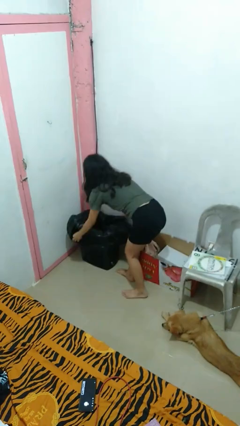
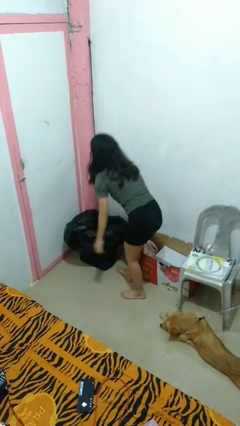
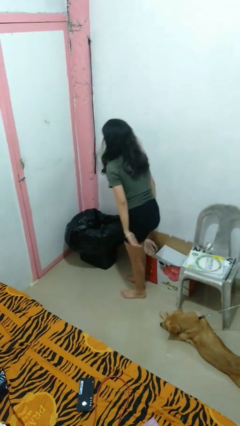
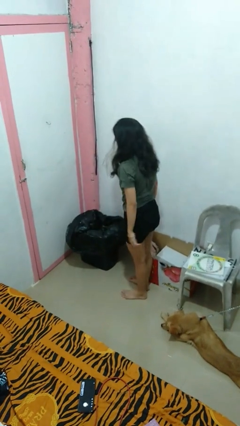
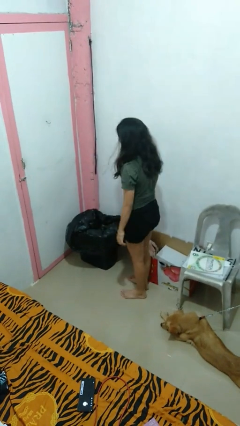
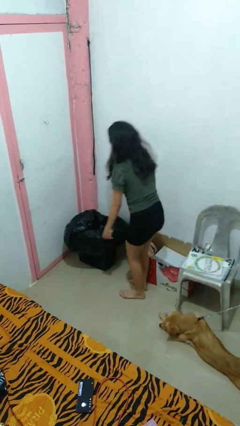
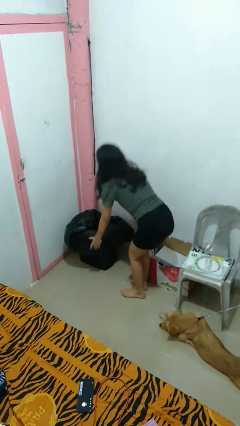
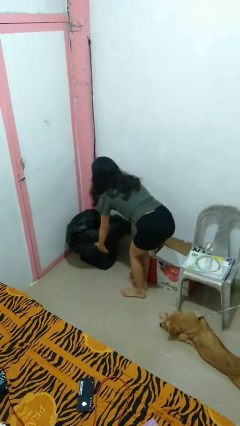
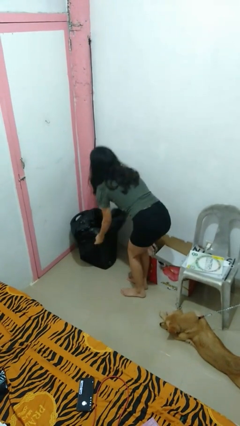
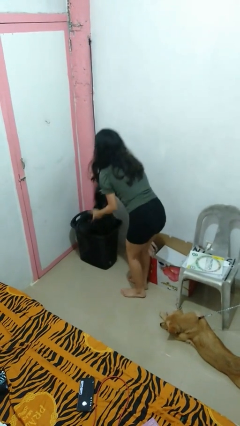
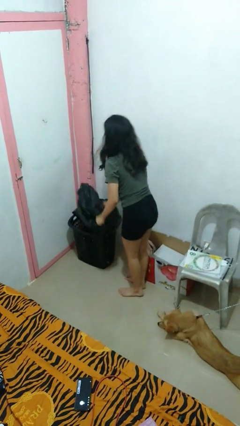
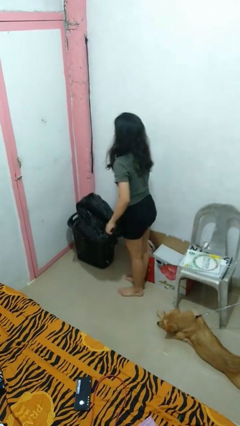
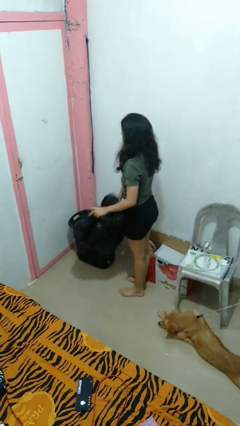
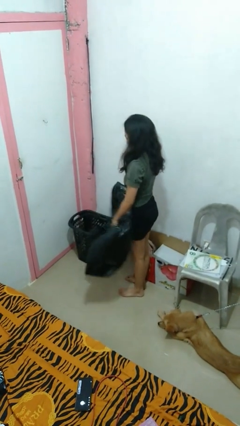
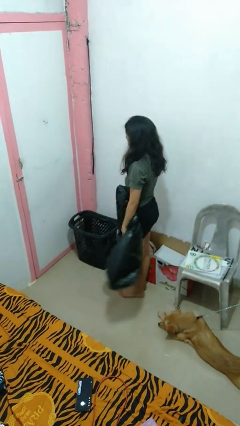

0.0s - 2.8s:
person removes trashbag from trashcan

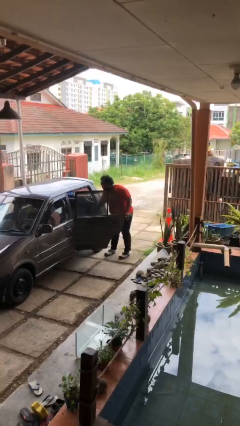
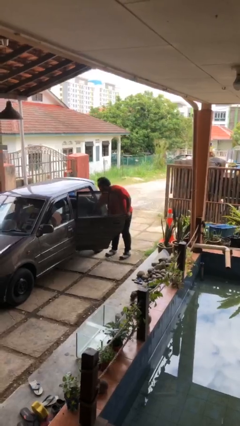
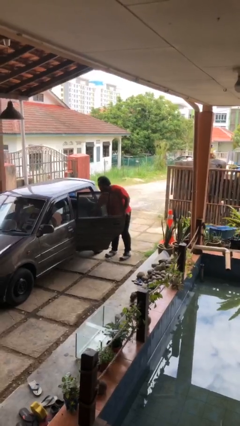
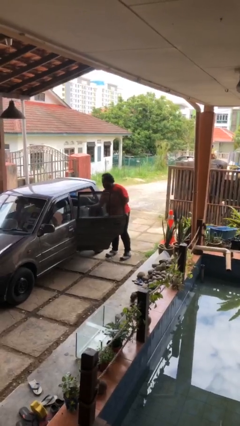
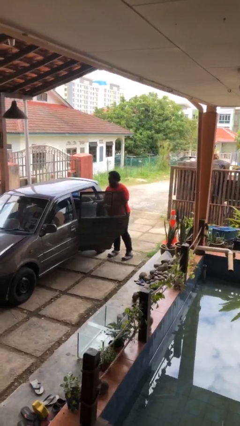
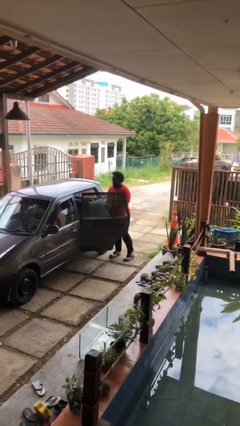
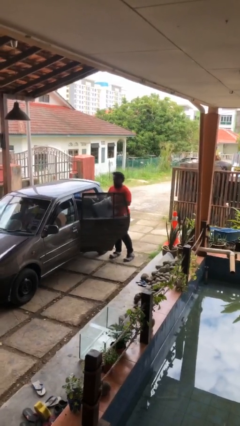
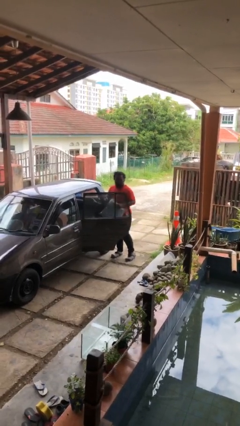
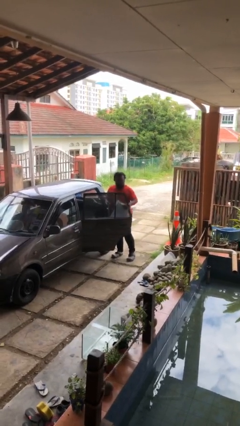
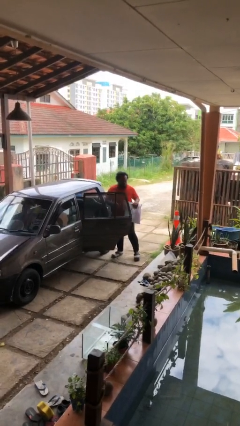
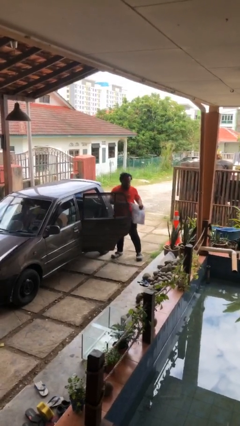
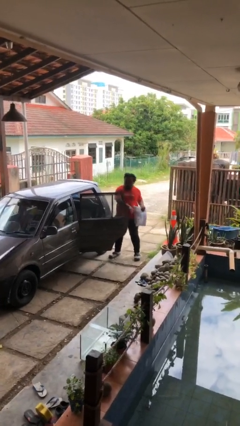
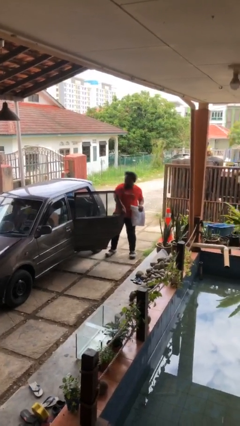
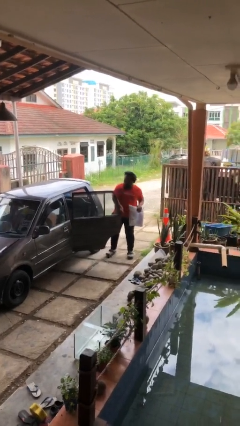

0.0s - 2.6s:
person unloads car

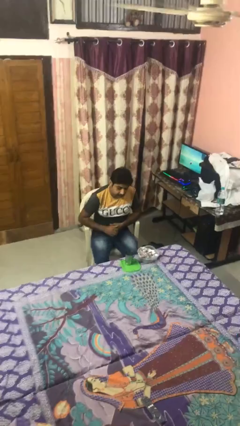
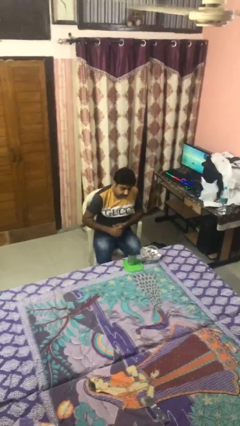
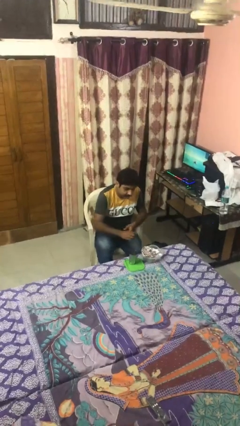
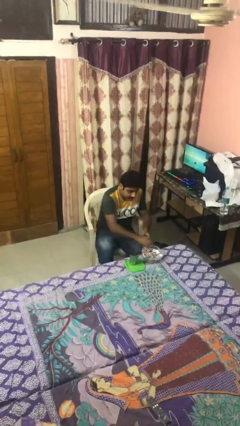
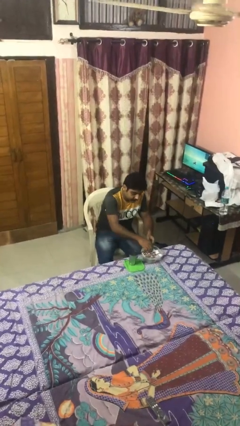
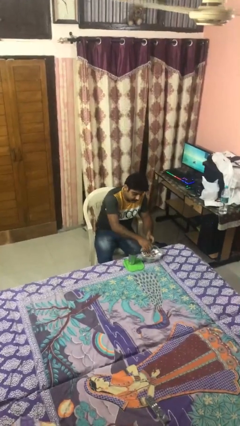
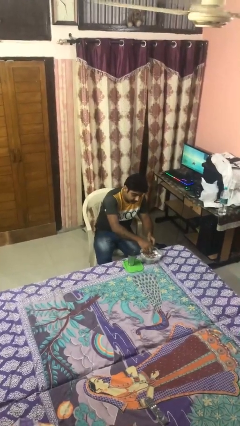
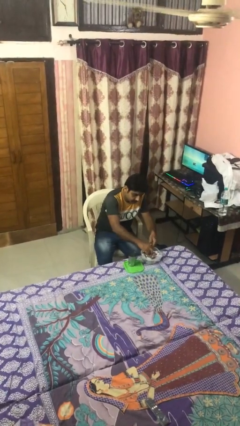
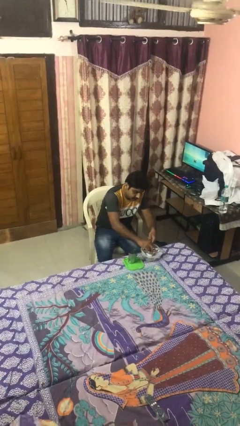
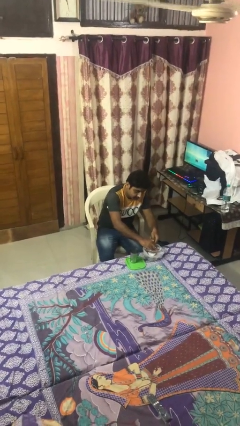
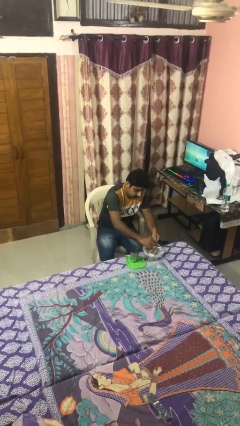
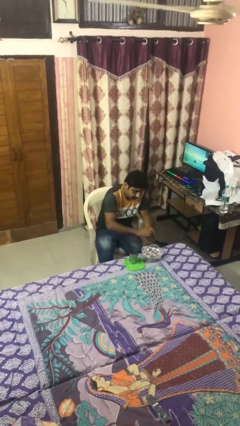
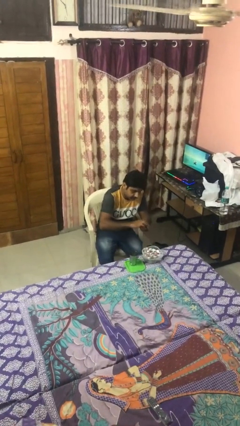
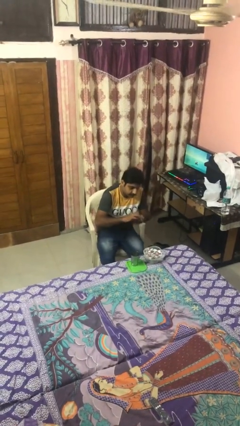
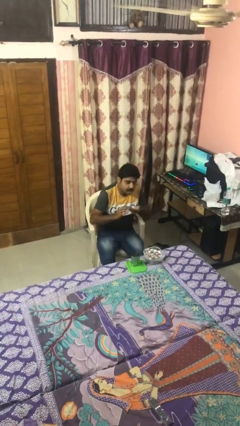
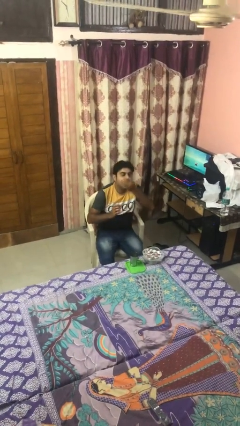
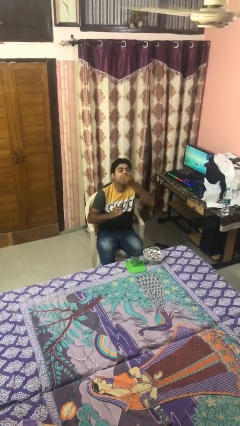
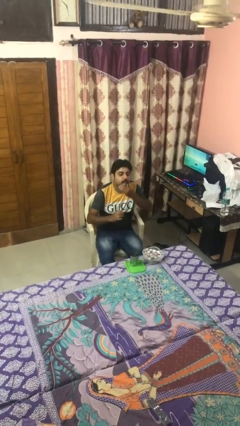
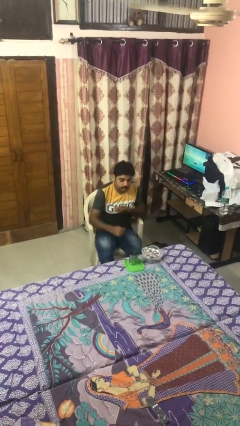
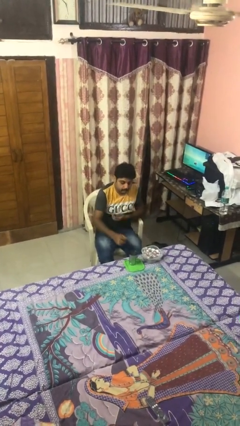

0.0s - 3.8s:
person takes medicine pills

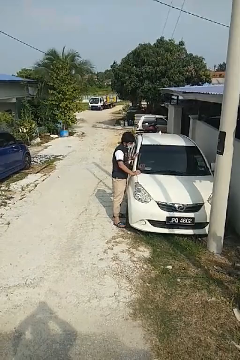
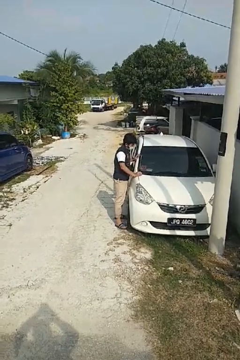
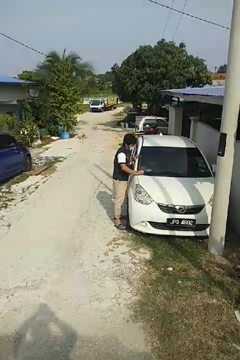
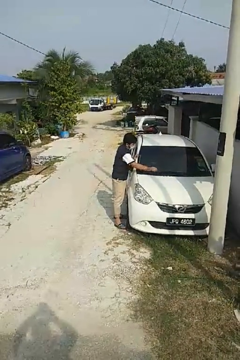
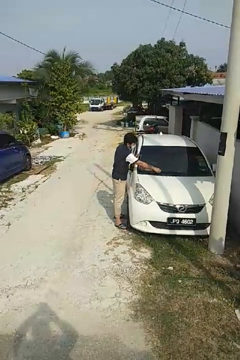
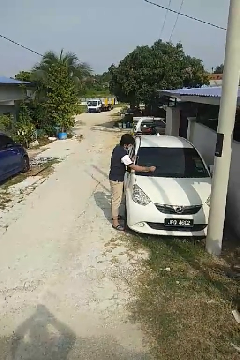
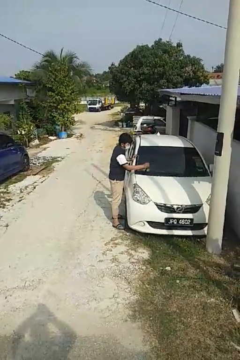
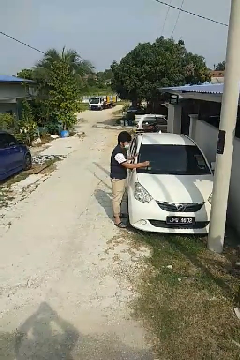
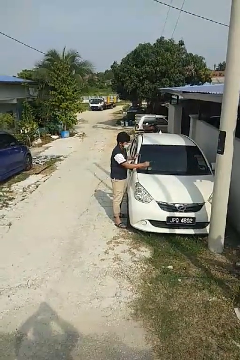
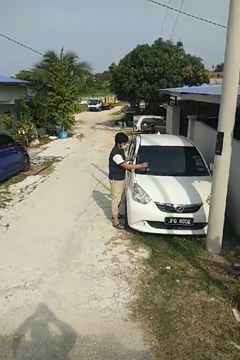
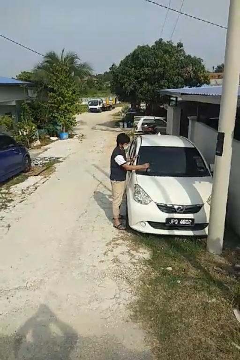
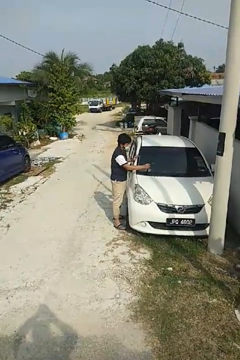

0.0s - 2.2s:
person flips up car wipers

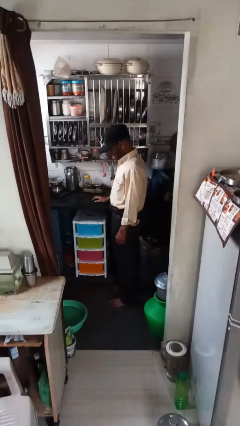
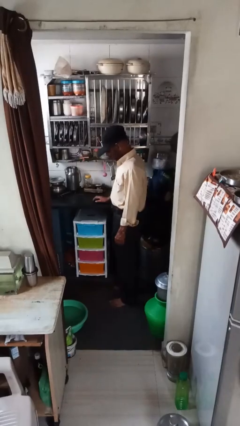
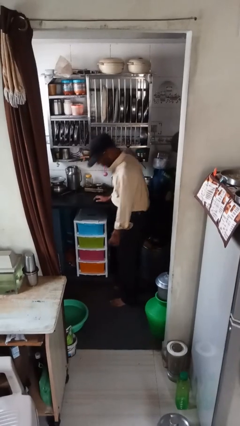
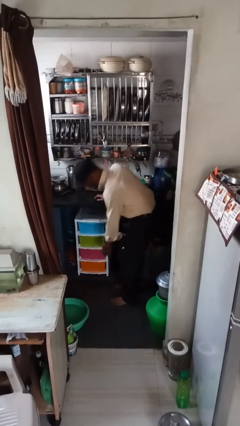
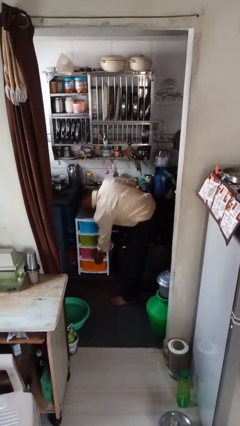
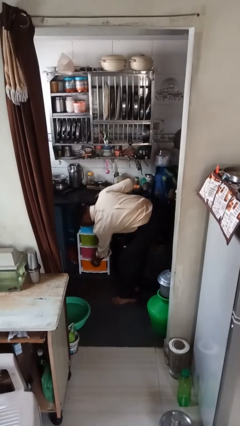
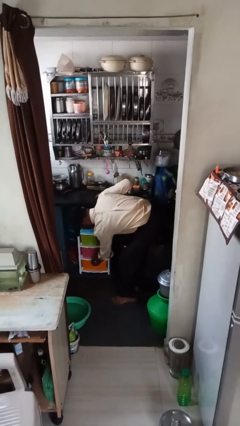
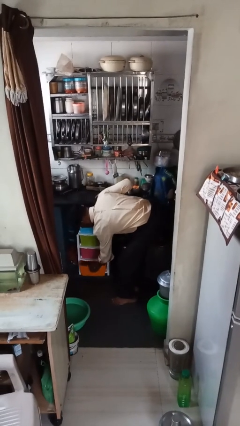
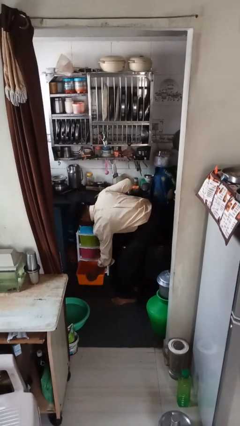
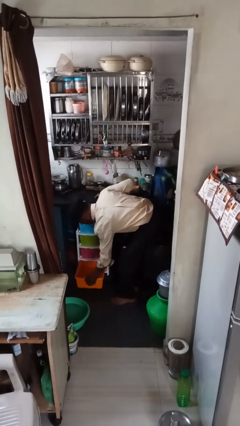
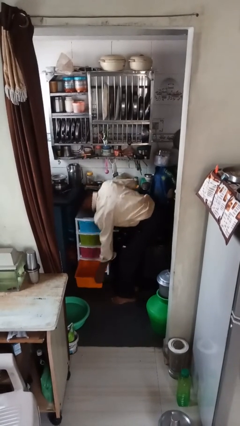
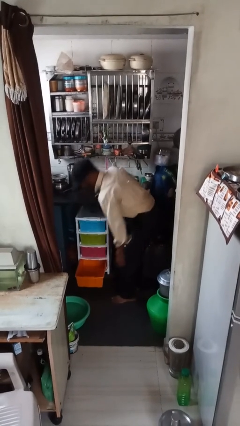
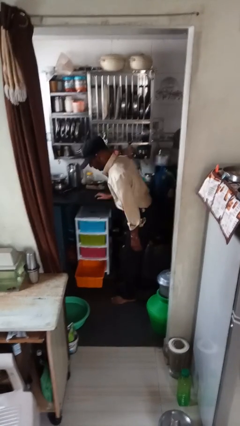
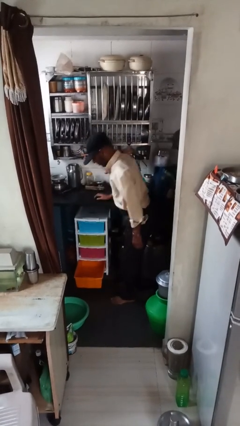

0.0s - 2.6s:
person opens kitchen drawer

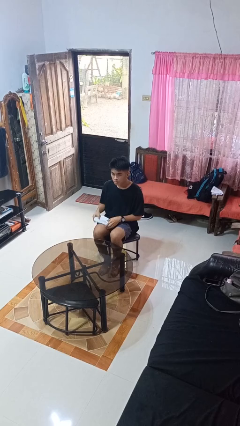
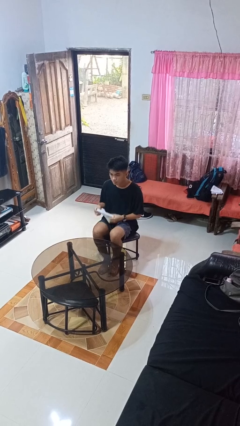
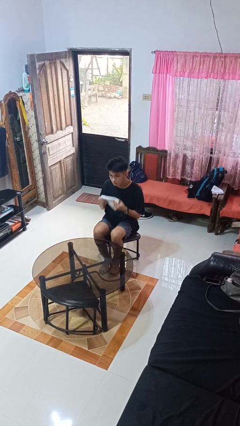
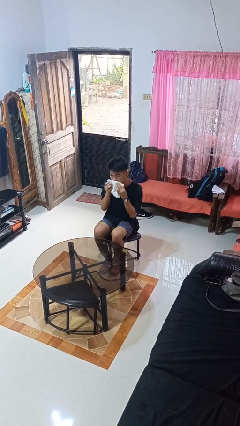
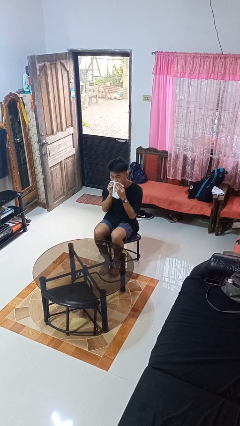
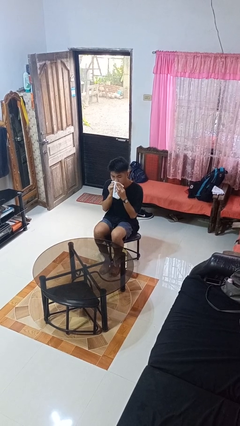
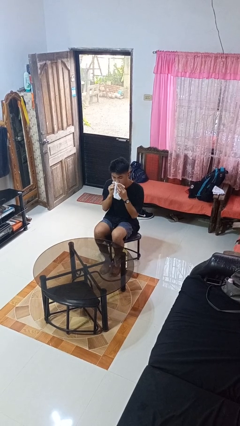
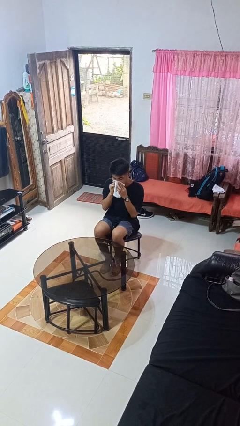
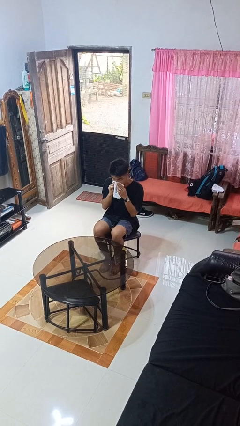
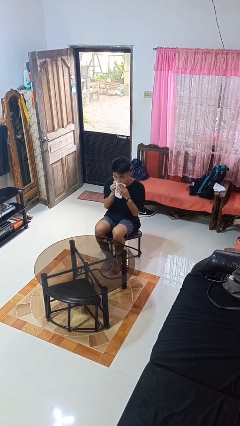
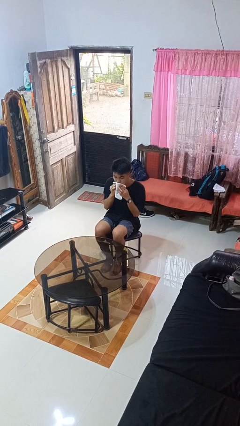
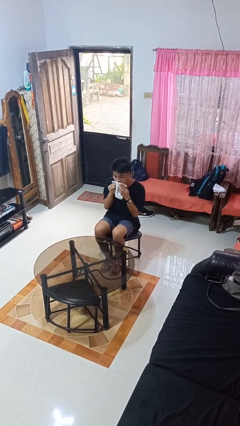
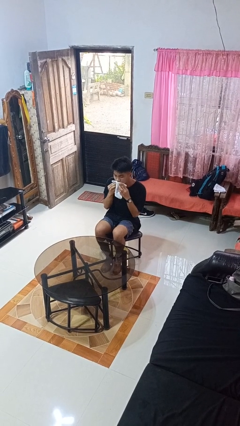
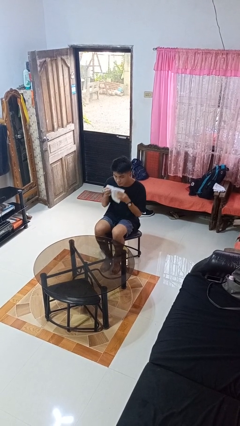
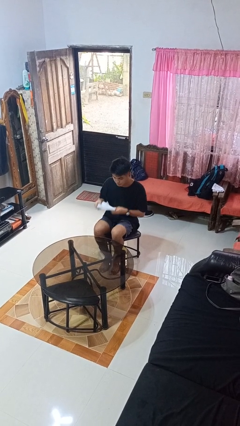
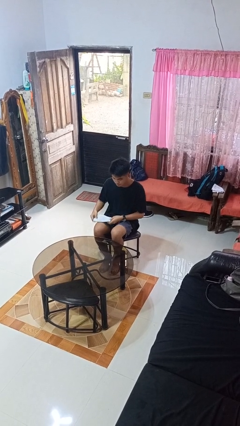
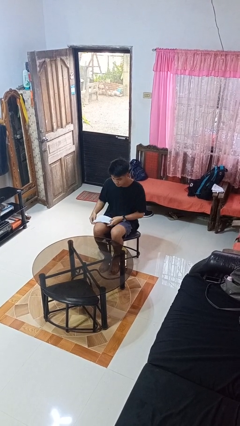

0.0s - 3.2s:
person wipes mouth with napkin

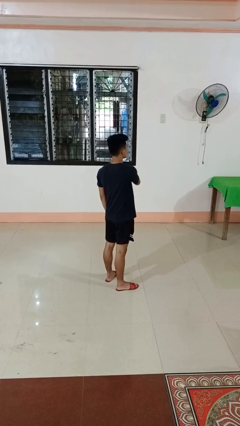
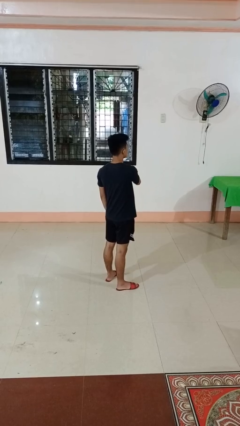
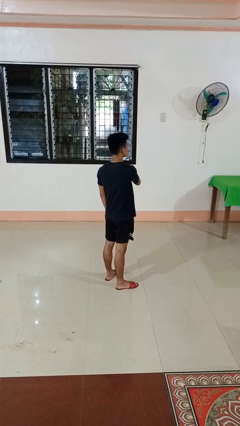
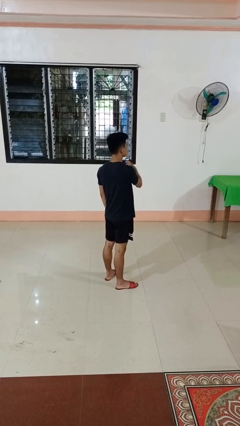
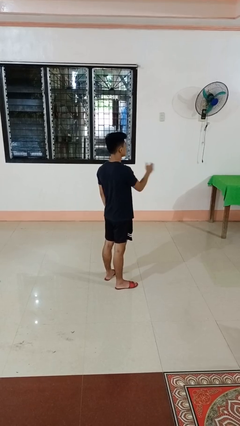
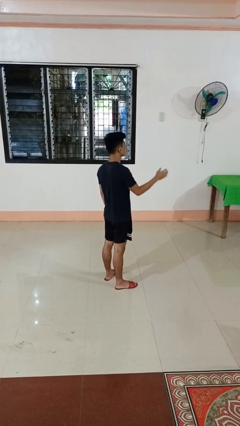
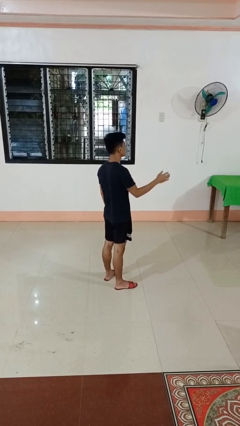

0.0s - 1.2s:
person gestures swipe left
